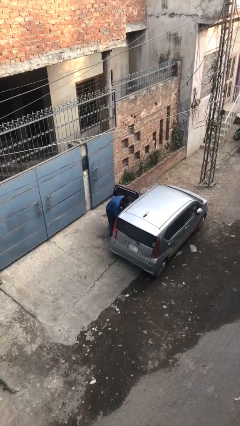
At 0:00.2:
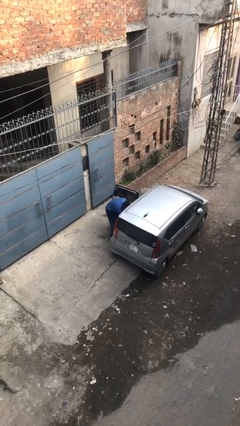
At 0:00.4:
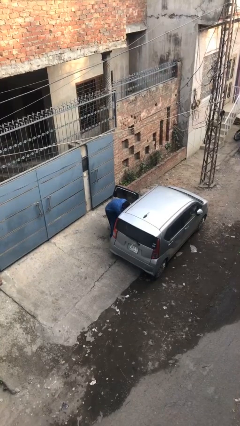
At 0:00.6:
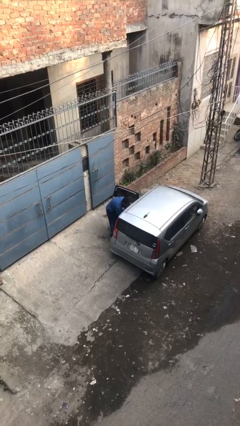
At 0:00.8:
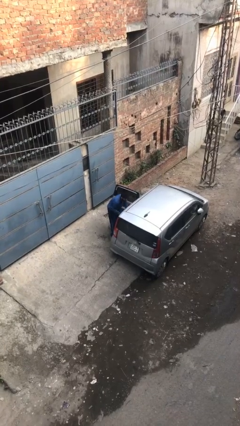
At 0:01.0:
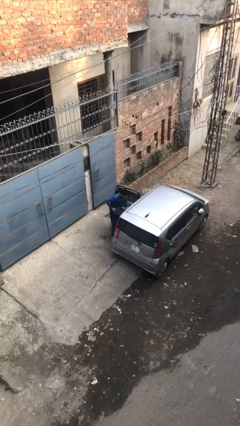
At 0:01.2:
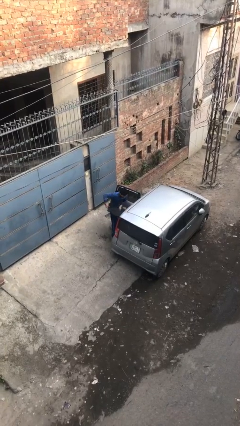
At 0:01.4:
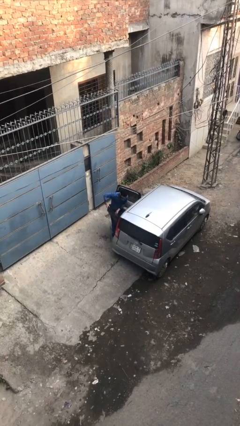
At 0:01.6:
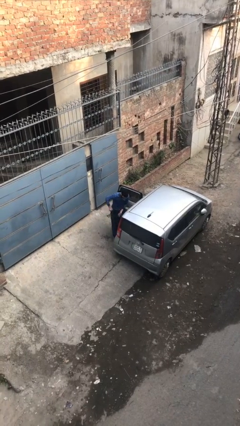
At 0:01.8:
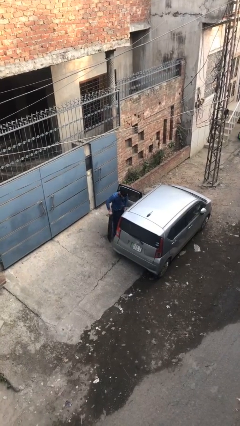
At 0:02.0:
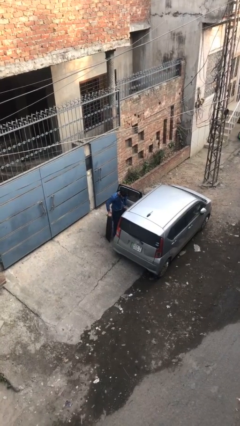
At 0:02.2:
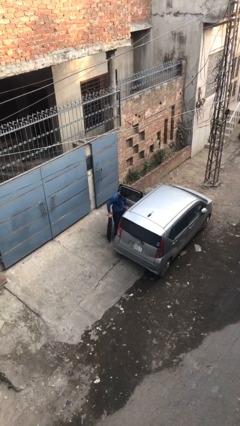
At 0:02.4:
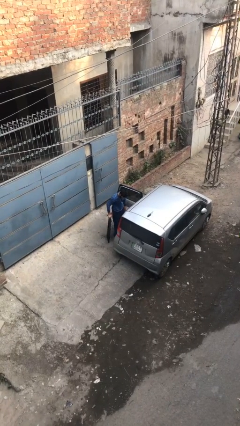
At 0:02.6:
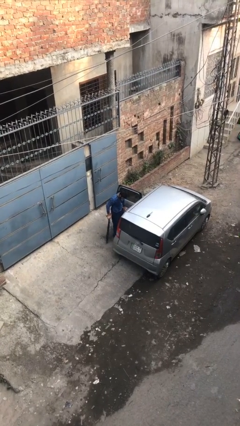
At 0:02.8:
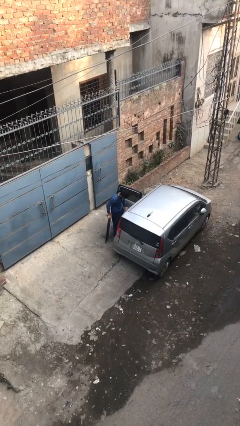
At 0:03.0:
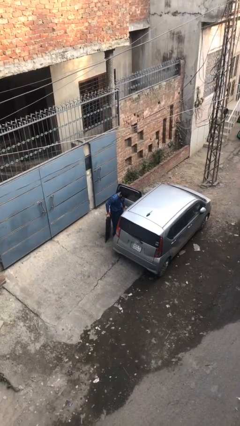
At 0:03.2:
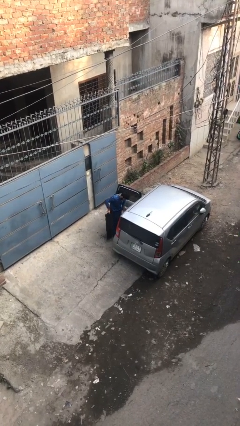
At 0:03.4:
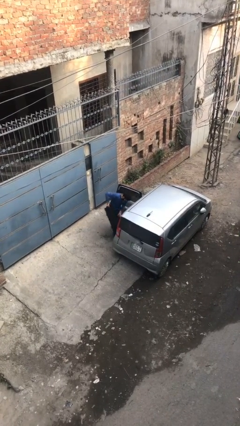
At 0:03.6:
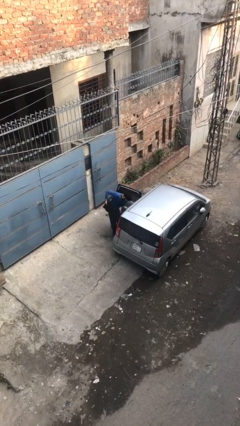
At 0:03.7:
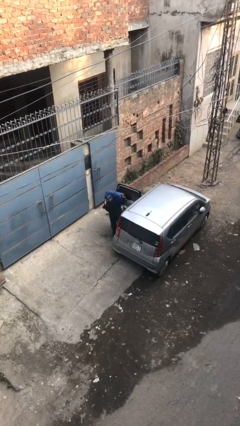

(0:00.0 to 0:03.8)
person unloads car

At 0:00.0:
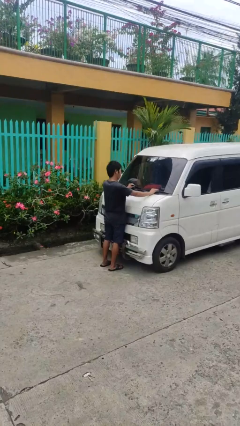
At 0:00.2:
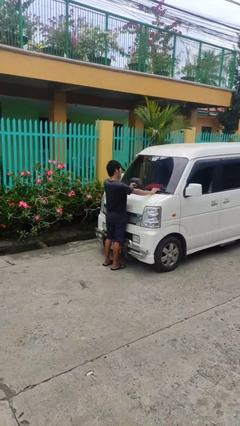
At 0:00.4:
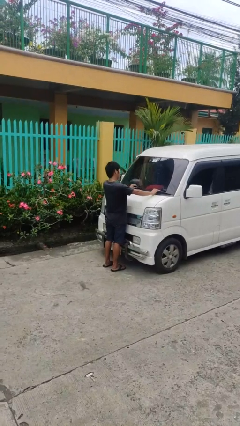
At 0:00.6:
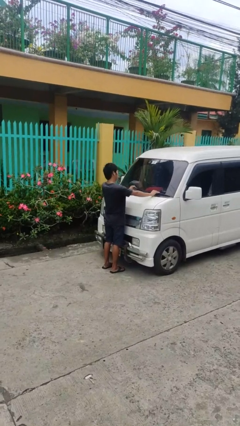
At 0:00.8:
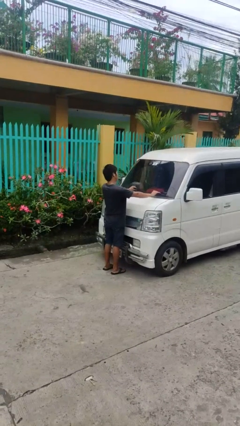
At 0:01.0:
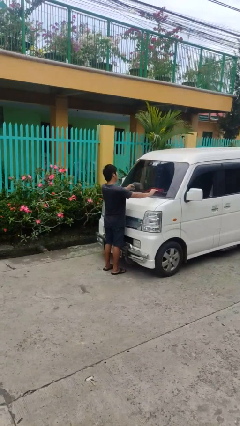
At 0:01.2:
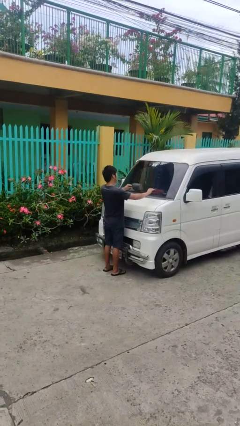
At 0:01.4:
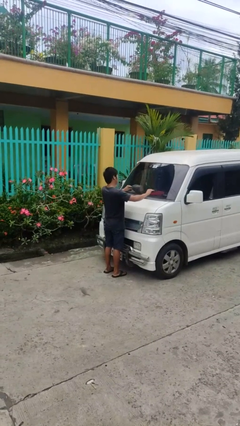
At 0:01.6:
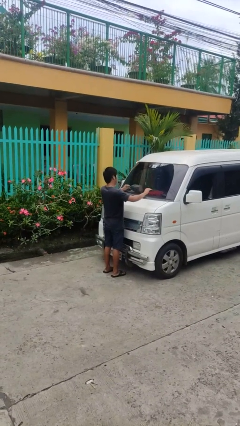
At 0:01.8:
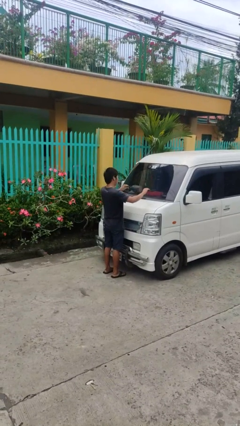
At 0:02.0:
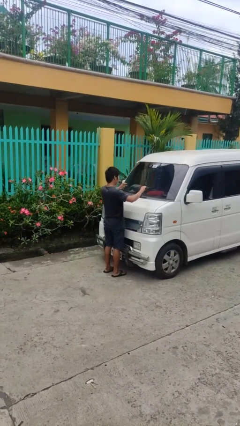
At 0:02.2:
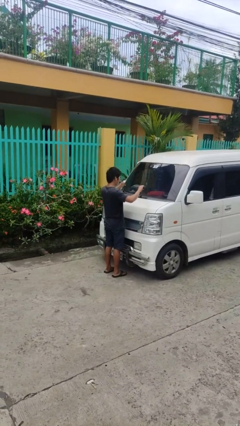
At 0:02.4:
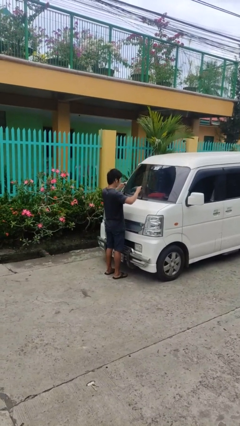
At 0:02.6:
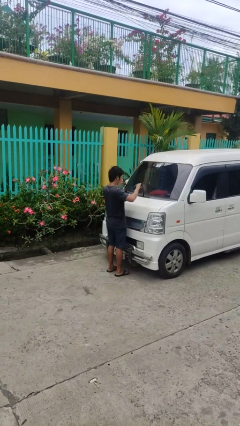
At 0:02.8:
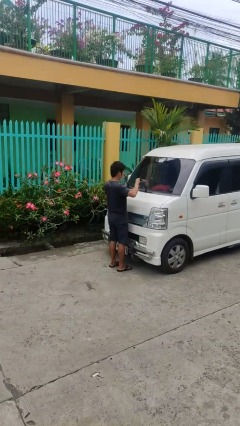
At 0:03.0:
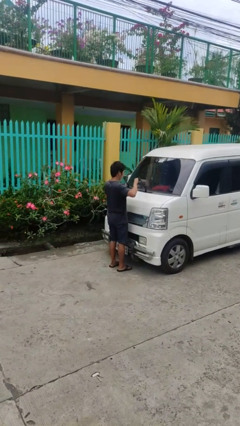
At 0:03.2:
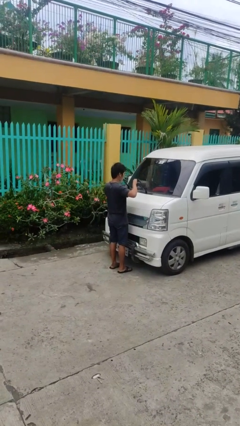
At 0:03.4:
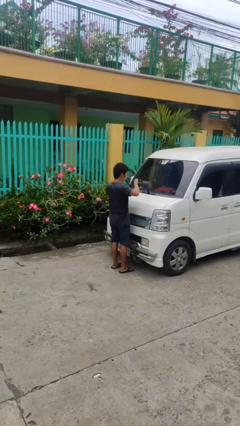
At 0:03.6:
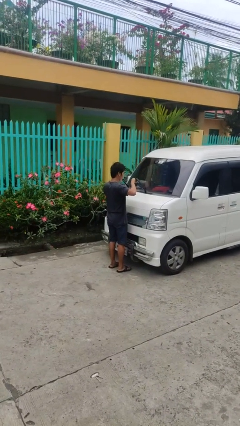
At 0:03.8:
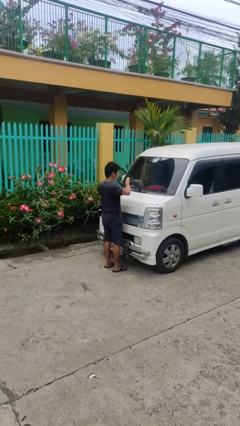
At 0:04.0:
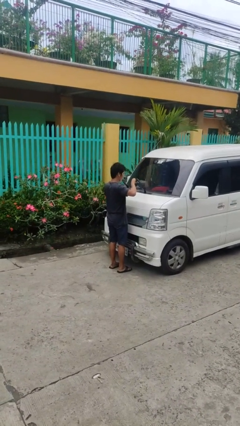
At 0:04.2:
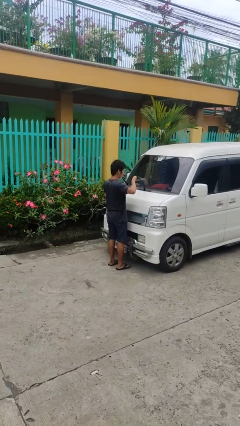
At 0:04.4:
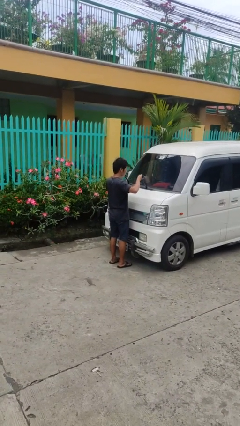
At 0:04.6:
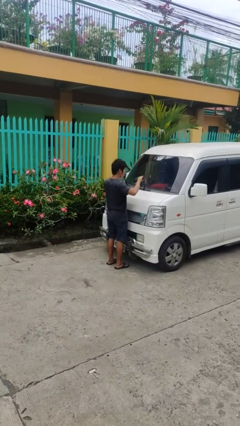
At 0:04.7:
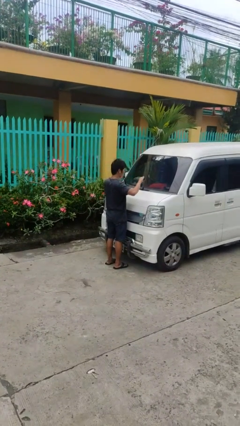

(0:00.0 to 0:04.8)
person flips up car wipers

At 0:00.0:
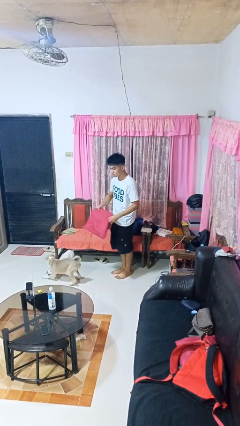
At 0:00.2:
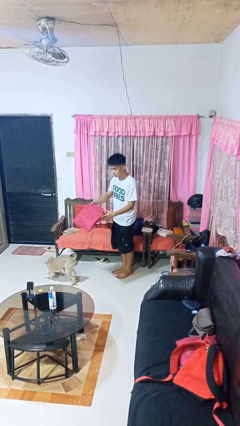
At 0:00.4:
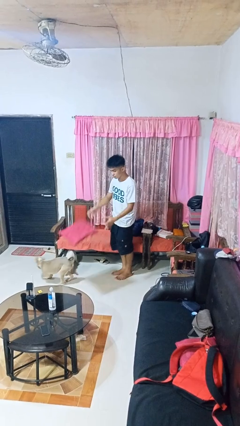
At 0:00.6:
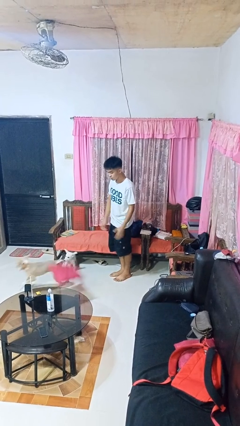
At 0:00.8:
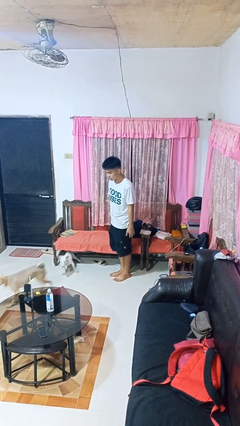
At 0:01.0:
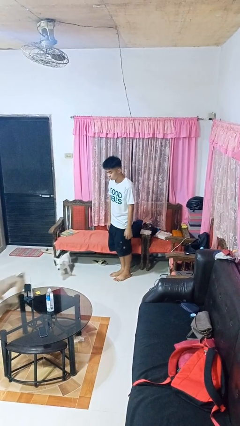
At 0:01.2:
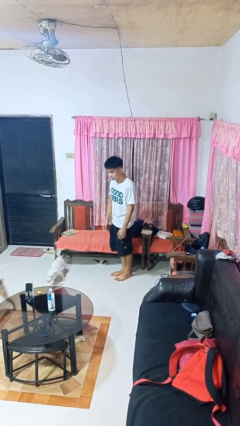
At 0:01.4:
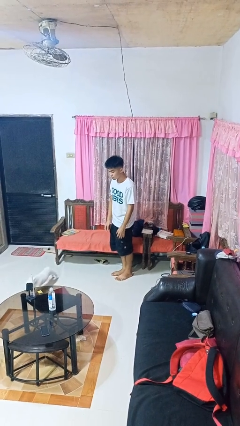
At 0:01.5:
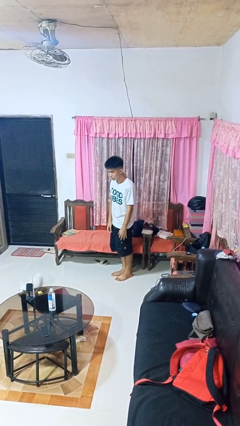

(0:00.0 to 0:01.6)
person throws object to ground

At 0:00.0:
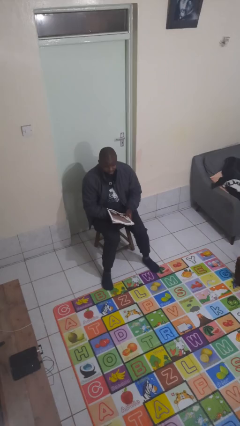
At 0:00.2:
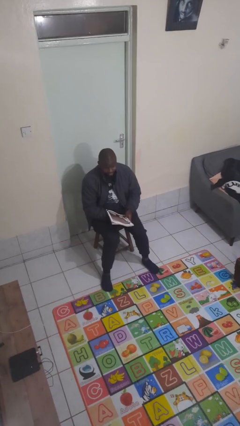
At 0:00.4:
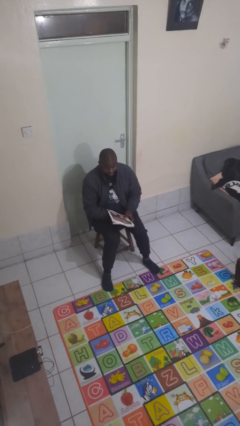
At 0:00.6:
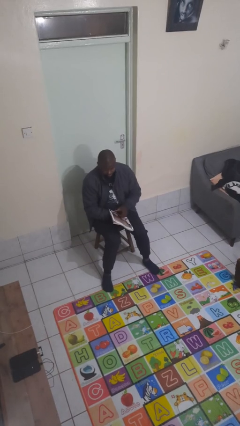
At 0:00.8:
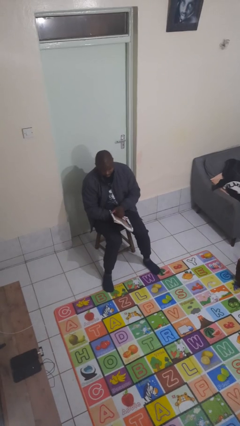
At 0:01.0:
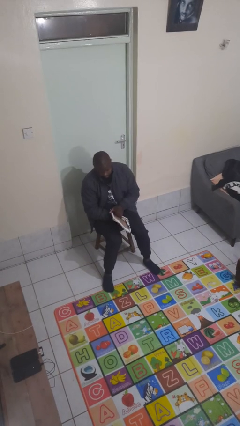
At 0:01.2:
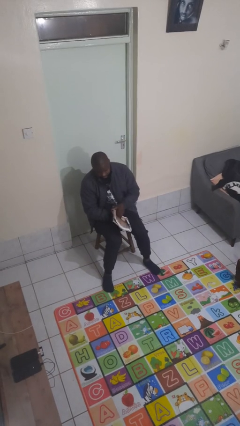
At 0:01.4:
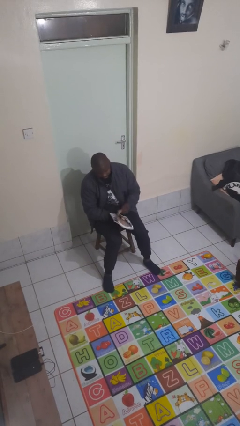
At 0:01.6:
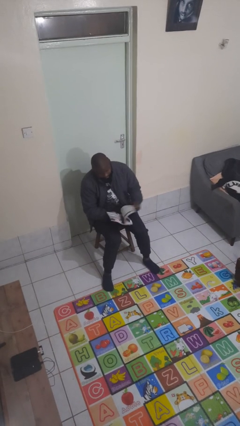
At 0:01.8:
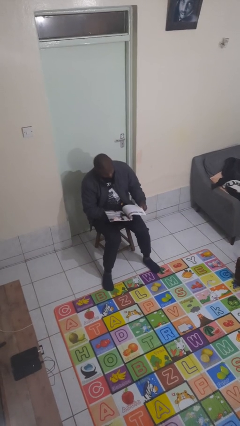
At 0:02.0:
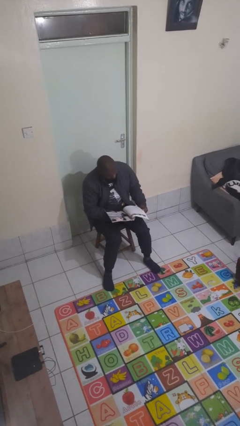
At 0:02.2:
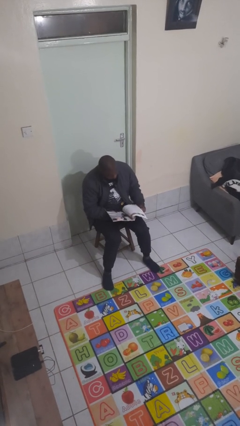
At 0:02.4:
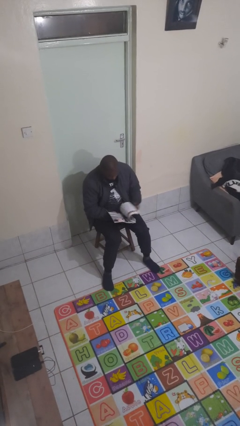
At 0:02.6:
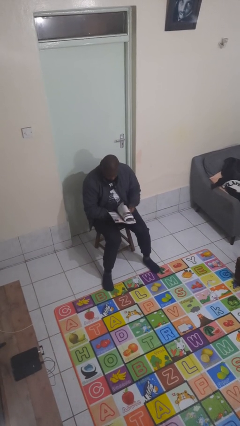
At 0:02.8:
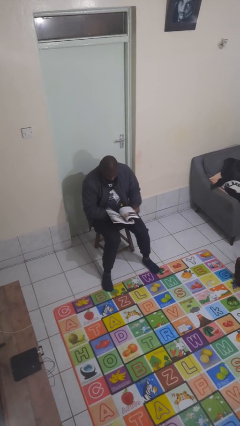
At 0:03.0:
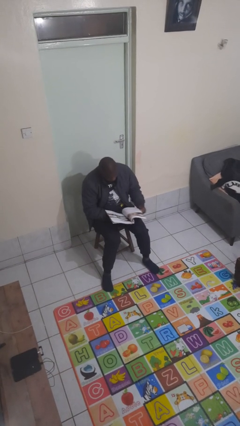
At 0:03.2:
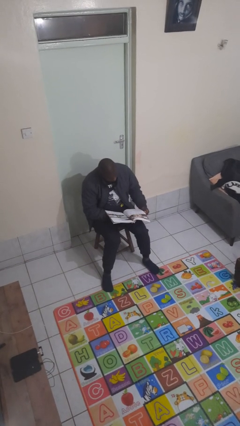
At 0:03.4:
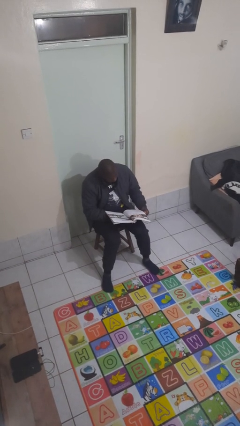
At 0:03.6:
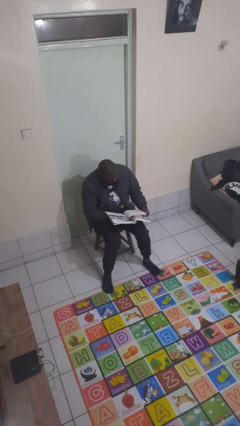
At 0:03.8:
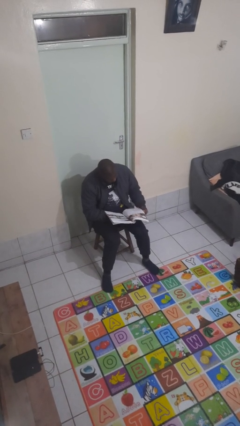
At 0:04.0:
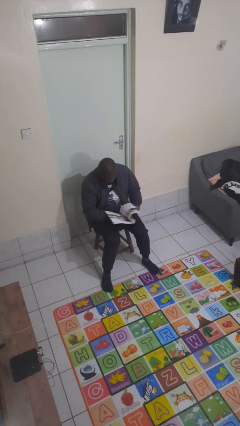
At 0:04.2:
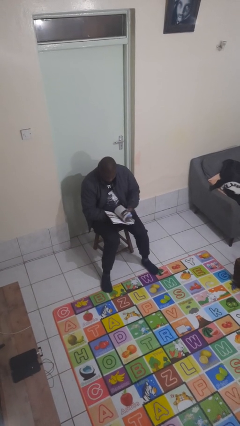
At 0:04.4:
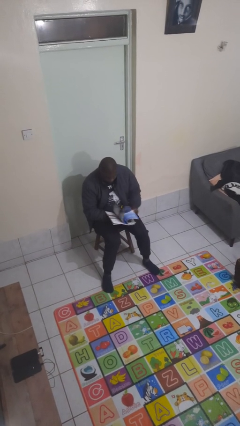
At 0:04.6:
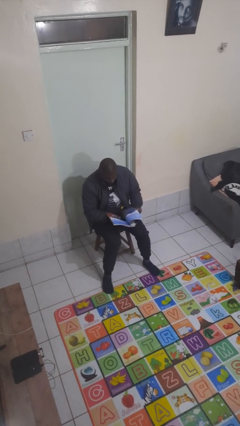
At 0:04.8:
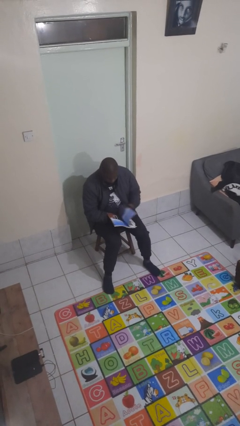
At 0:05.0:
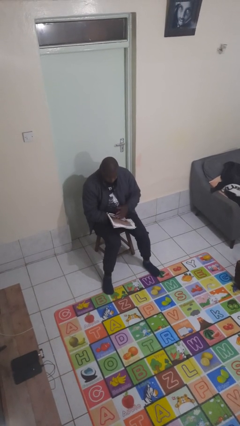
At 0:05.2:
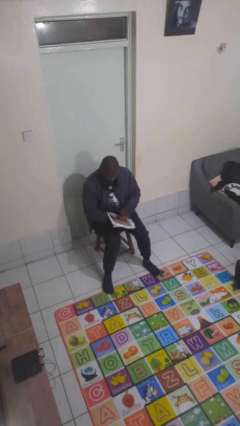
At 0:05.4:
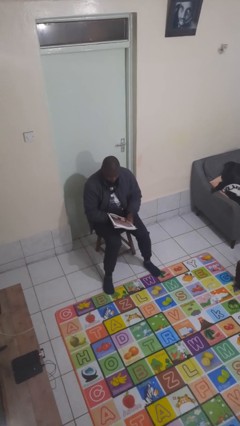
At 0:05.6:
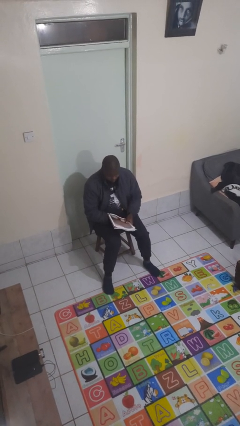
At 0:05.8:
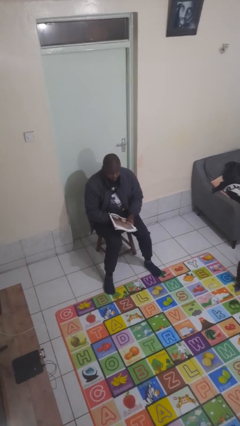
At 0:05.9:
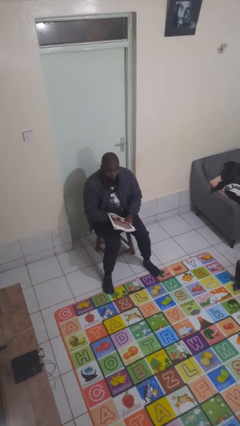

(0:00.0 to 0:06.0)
person reads magazine

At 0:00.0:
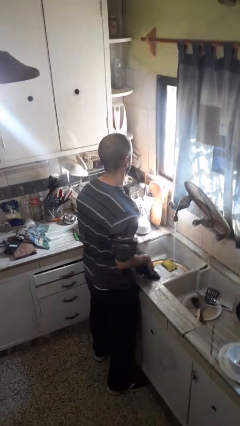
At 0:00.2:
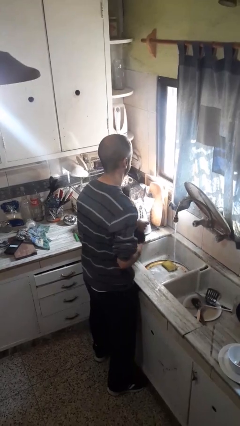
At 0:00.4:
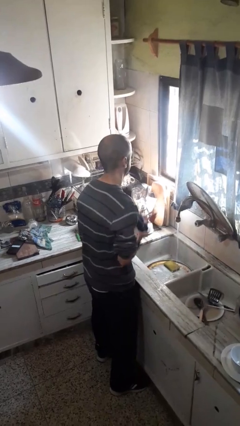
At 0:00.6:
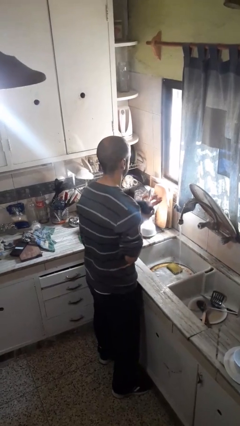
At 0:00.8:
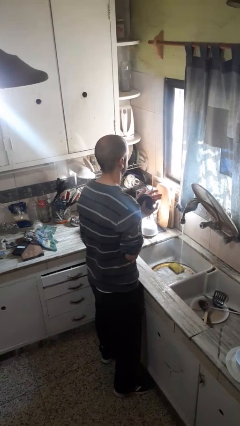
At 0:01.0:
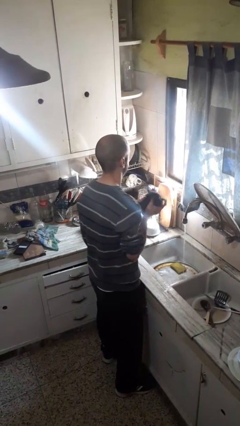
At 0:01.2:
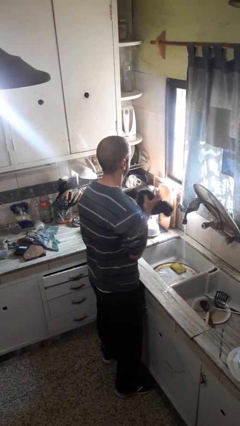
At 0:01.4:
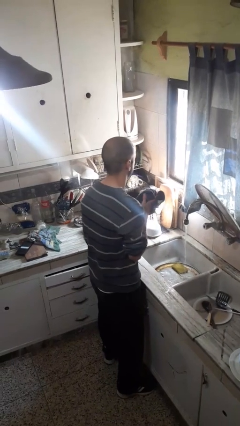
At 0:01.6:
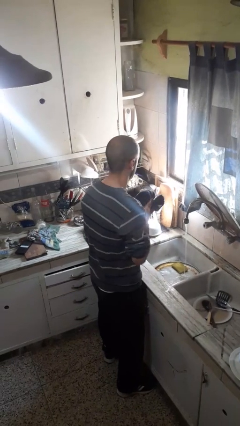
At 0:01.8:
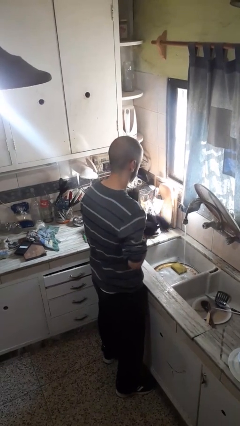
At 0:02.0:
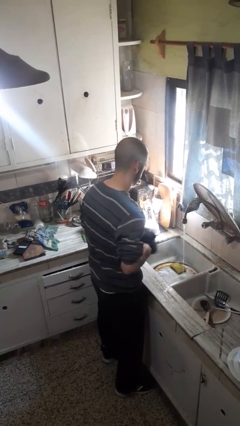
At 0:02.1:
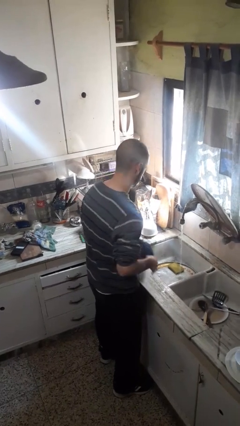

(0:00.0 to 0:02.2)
person dries hands with towel
